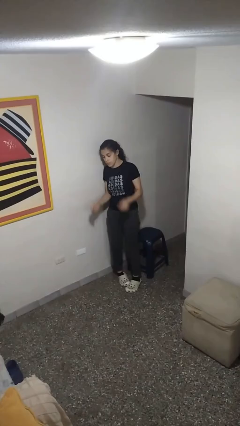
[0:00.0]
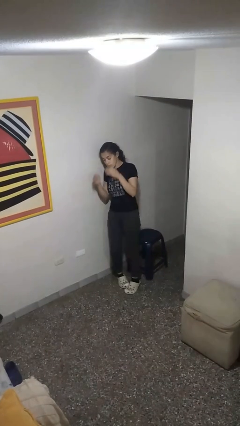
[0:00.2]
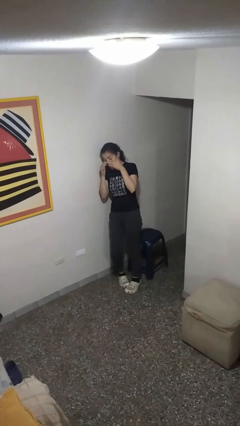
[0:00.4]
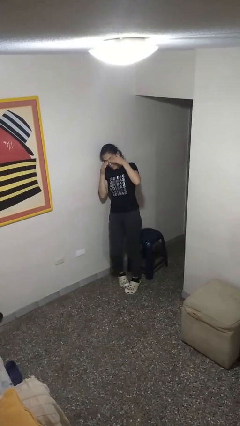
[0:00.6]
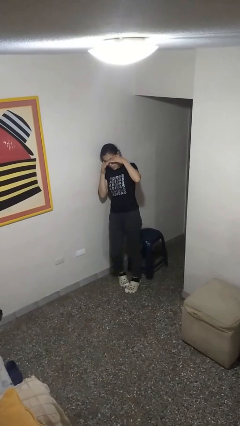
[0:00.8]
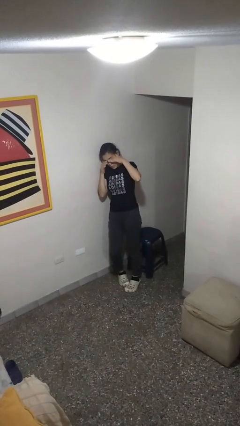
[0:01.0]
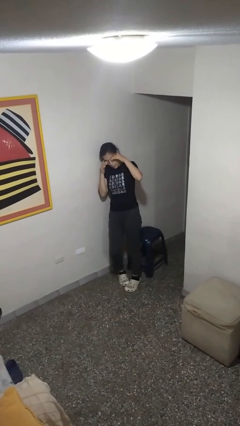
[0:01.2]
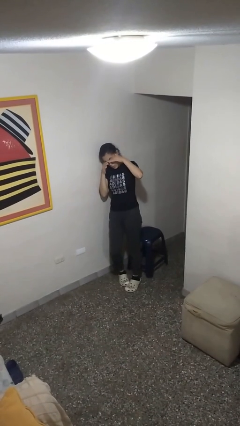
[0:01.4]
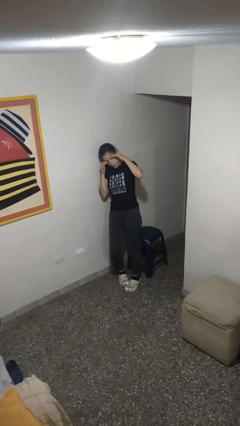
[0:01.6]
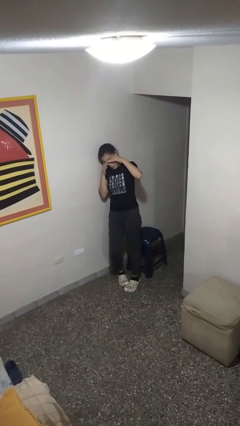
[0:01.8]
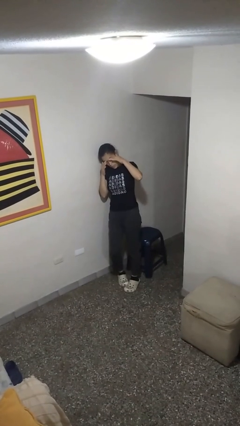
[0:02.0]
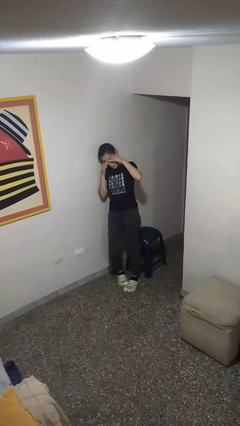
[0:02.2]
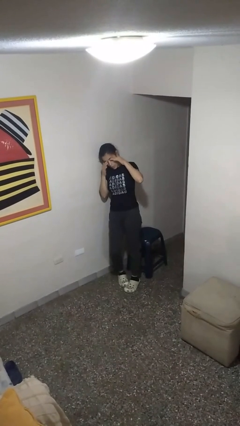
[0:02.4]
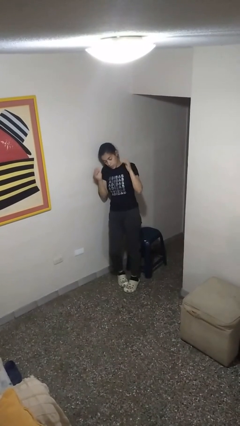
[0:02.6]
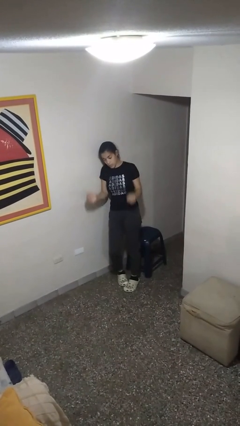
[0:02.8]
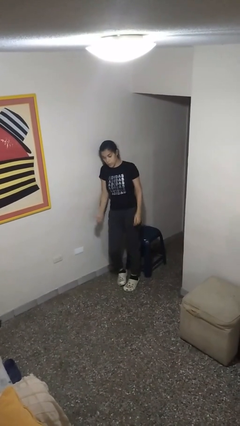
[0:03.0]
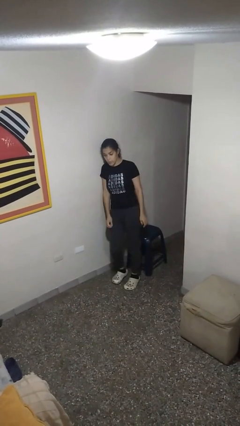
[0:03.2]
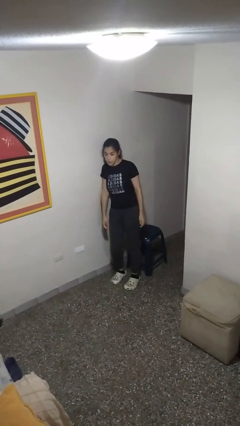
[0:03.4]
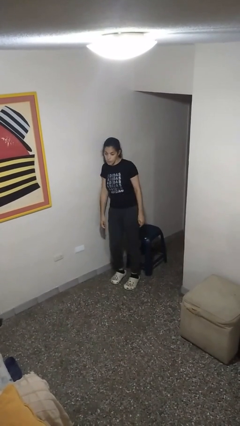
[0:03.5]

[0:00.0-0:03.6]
person rubs eyes

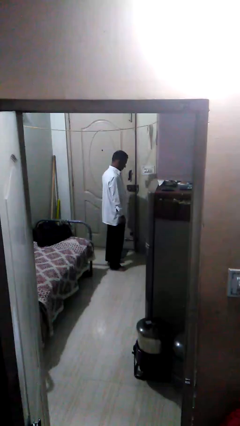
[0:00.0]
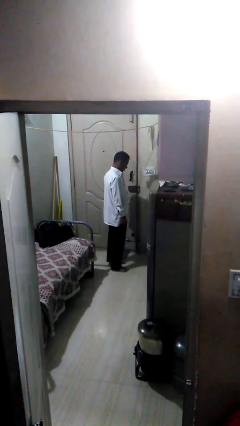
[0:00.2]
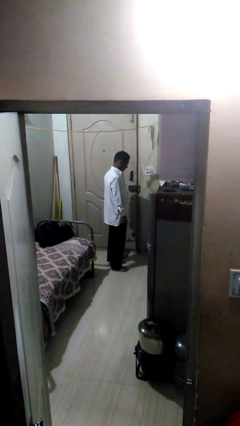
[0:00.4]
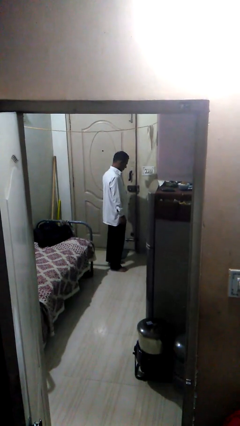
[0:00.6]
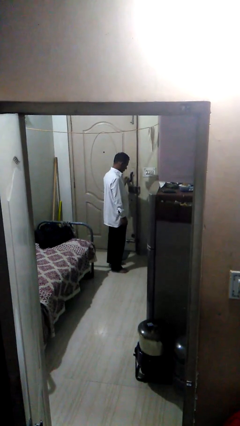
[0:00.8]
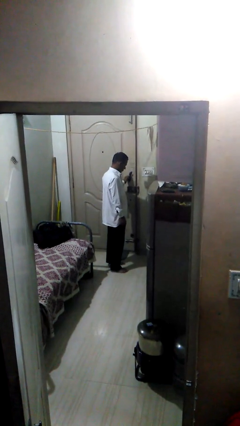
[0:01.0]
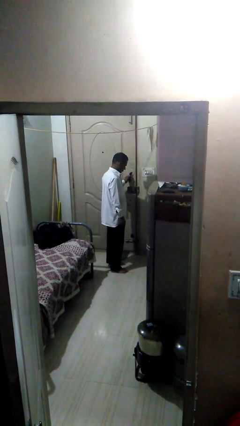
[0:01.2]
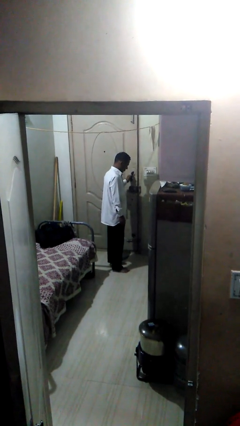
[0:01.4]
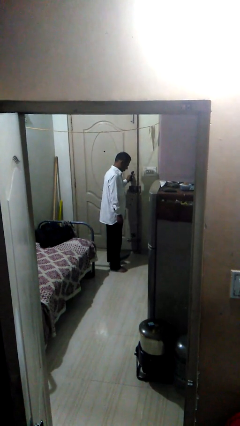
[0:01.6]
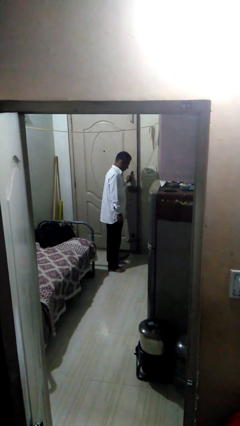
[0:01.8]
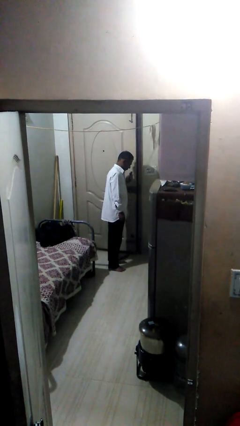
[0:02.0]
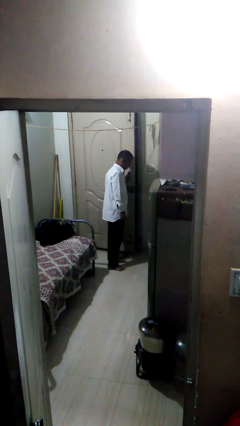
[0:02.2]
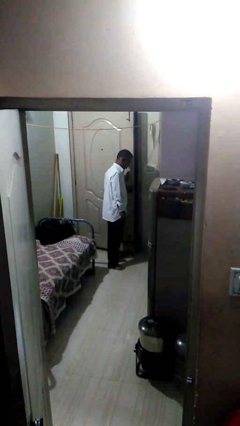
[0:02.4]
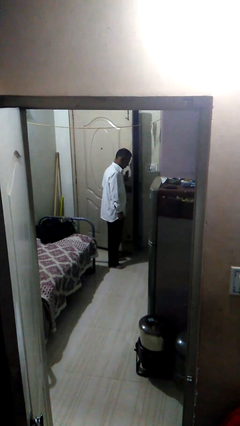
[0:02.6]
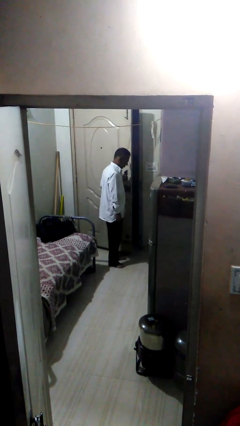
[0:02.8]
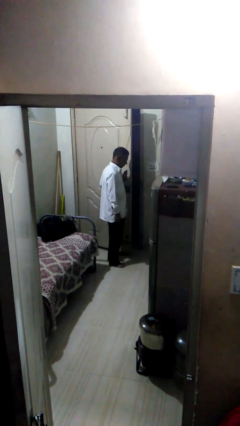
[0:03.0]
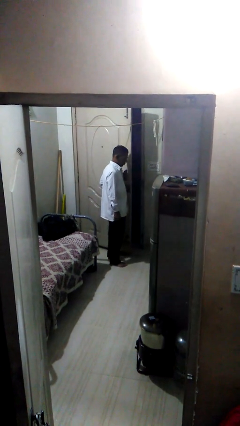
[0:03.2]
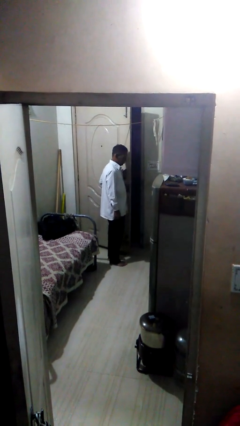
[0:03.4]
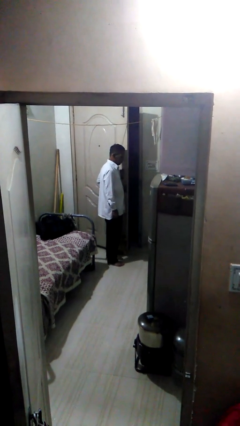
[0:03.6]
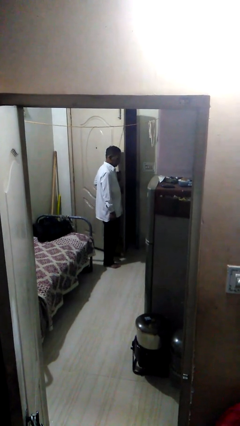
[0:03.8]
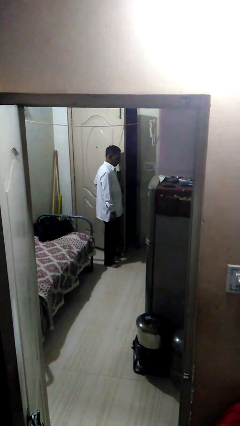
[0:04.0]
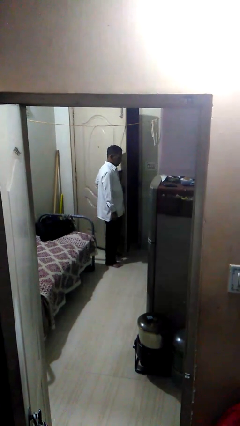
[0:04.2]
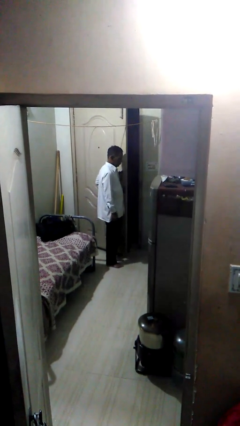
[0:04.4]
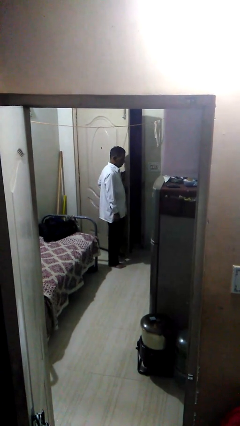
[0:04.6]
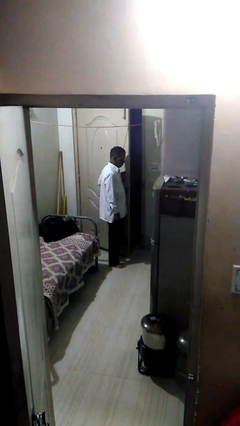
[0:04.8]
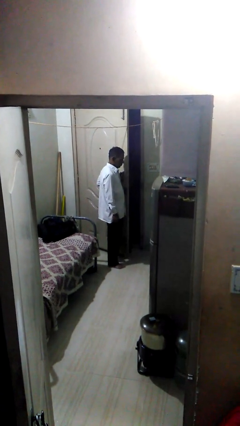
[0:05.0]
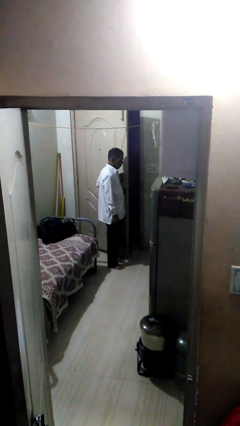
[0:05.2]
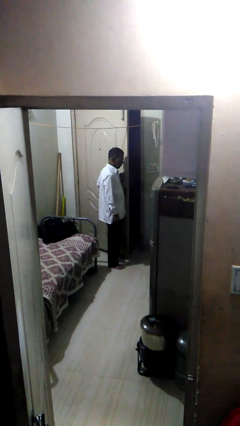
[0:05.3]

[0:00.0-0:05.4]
person opens facility door

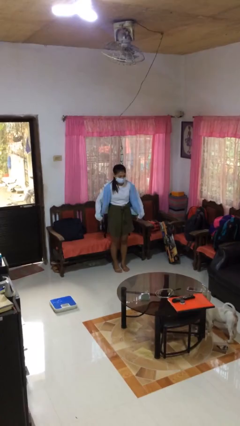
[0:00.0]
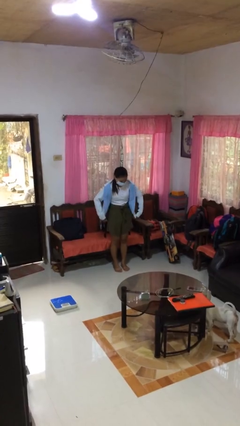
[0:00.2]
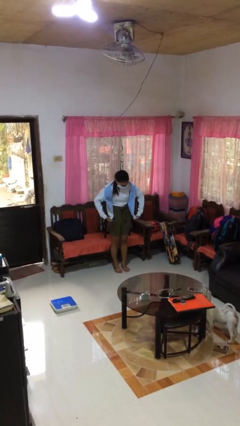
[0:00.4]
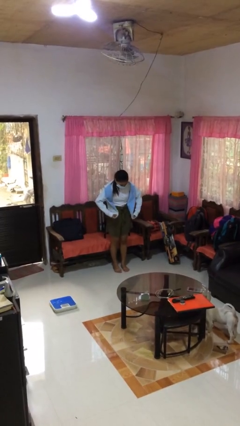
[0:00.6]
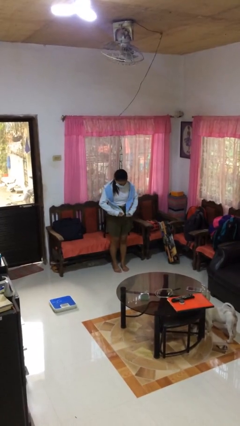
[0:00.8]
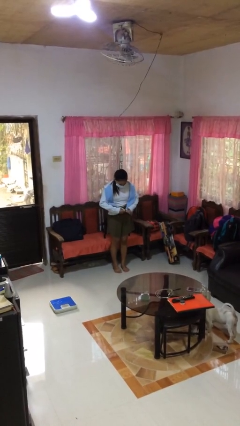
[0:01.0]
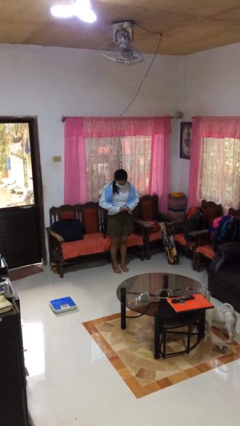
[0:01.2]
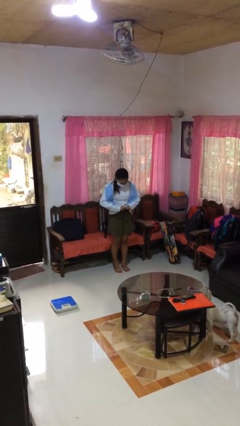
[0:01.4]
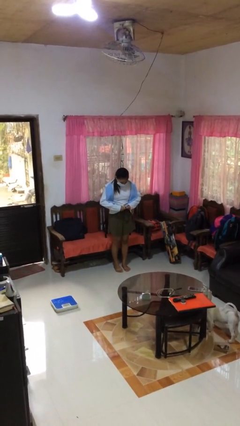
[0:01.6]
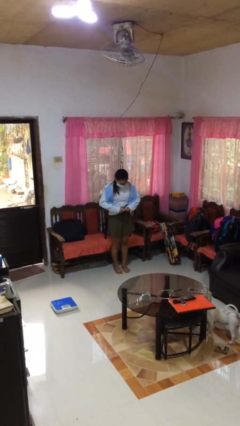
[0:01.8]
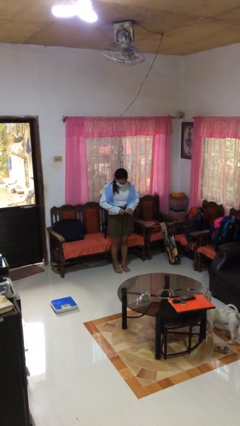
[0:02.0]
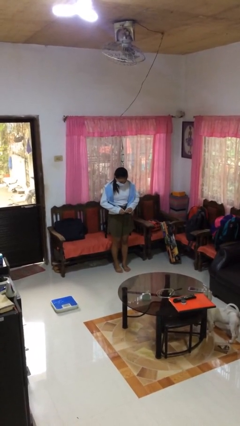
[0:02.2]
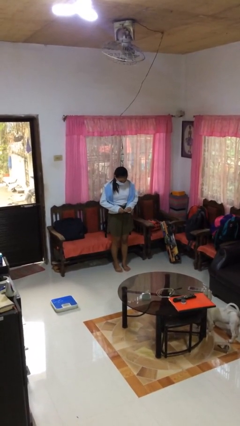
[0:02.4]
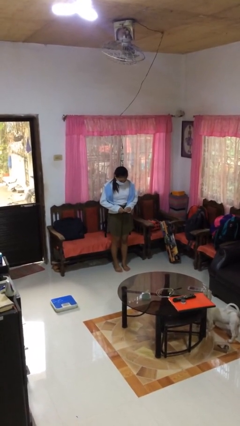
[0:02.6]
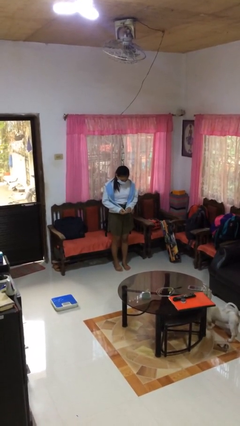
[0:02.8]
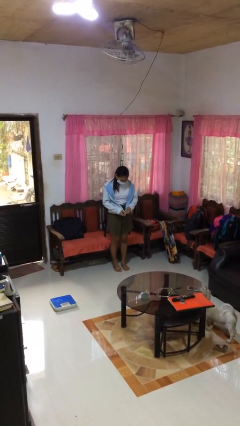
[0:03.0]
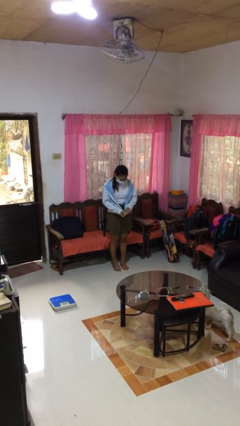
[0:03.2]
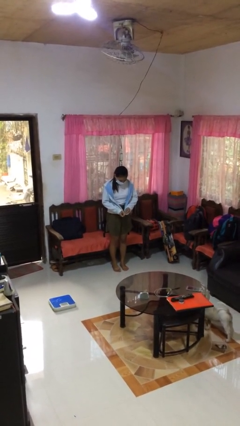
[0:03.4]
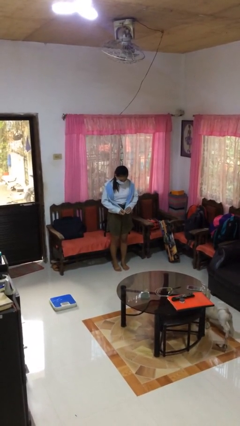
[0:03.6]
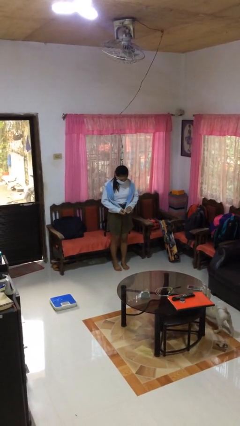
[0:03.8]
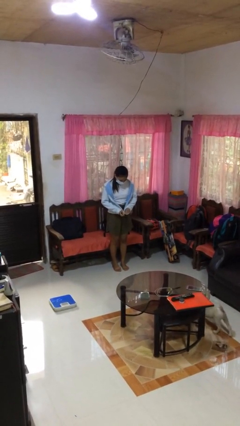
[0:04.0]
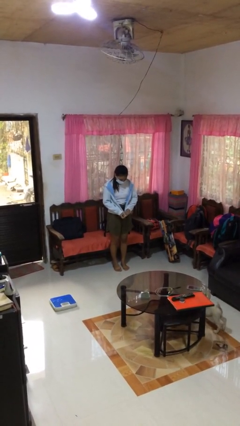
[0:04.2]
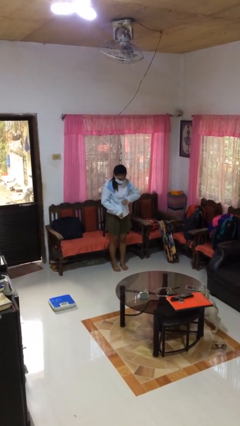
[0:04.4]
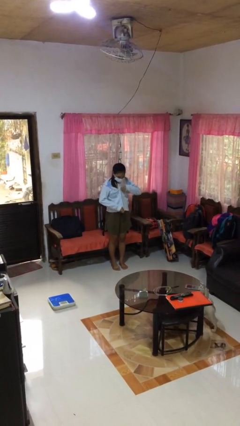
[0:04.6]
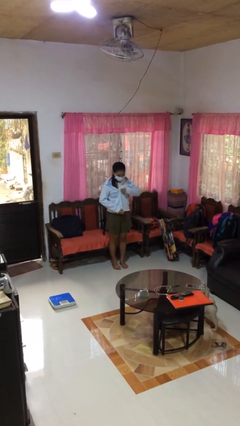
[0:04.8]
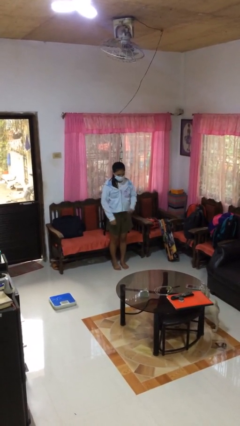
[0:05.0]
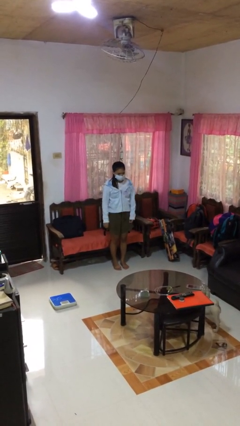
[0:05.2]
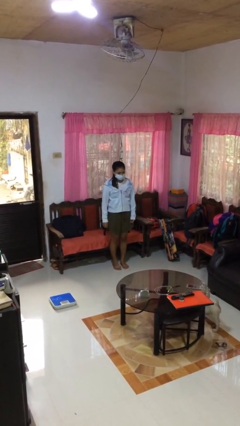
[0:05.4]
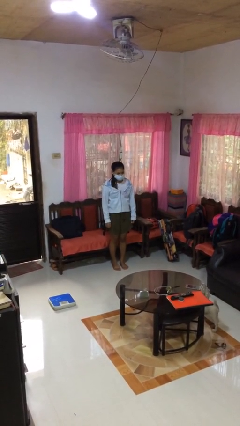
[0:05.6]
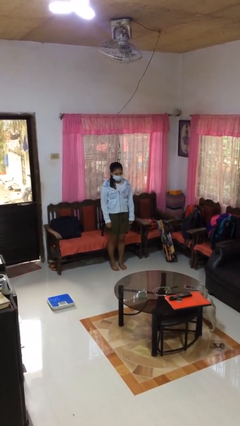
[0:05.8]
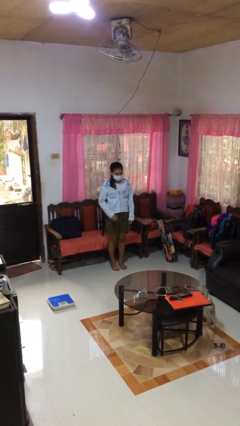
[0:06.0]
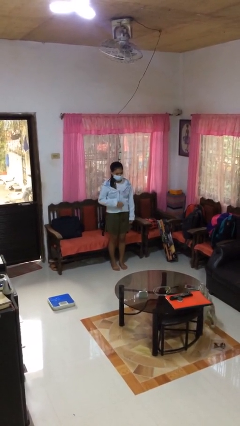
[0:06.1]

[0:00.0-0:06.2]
person zips up jacket

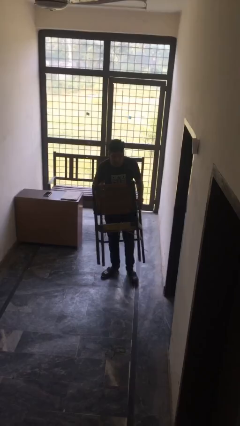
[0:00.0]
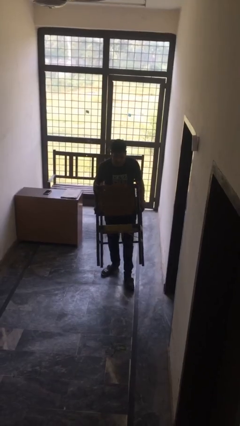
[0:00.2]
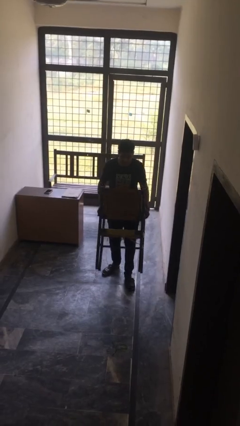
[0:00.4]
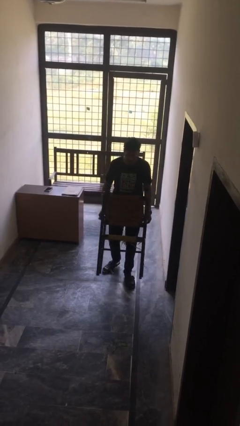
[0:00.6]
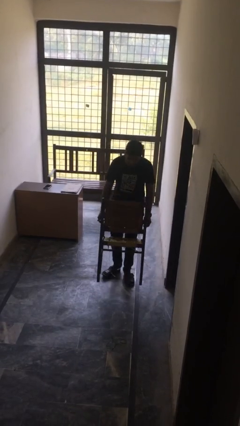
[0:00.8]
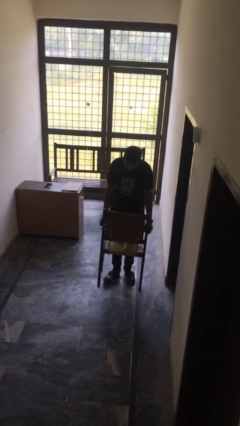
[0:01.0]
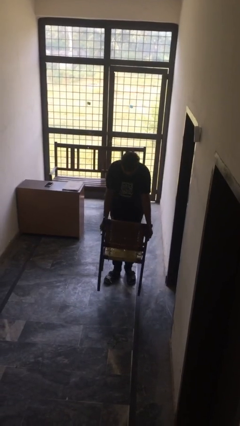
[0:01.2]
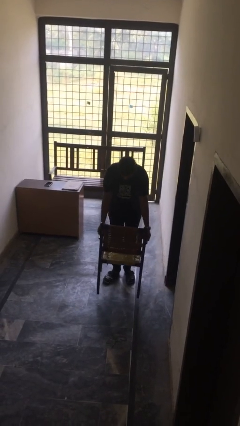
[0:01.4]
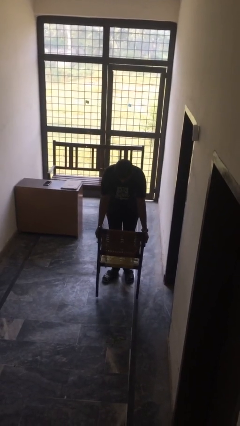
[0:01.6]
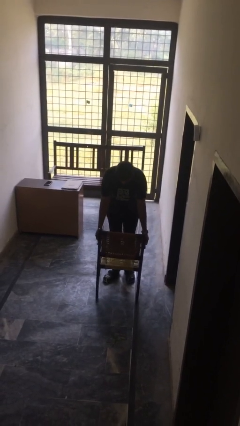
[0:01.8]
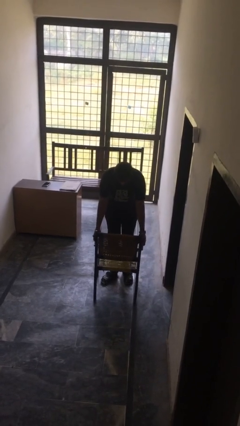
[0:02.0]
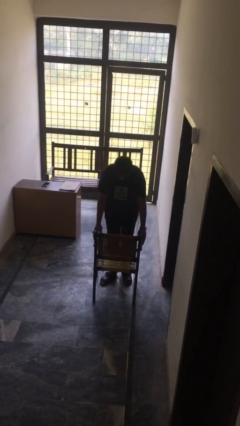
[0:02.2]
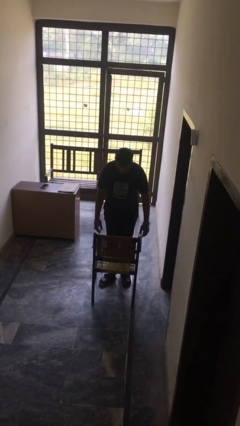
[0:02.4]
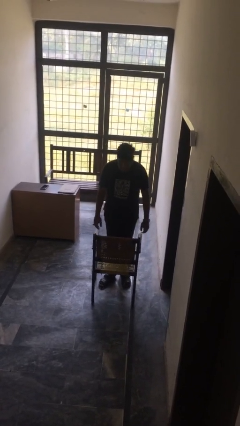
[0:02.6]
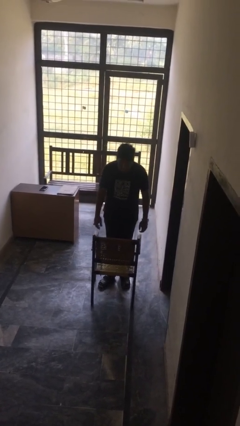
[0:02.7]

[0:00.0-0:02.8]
person puts down object on floor
